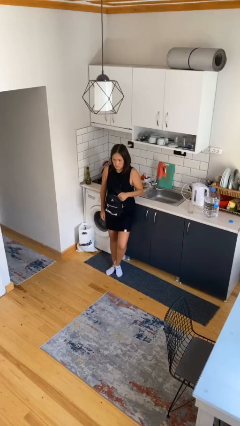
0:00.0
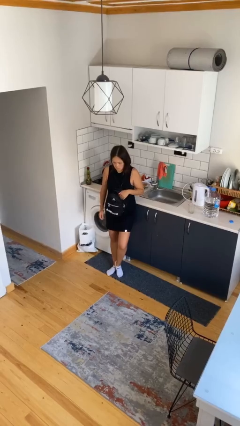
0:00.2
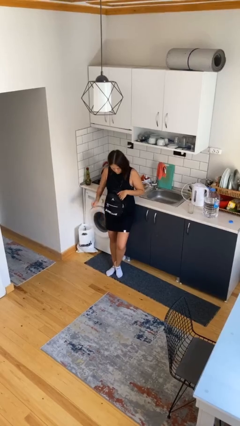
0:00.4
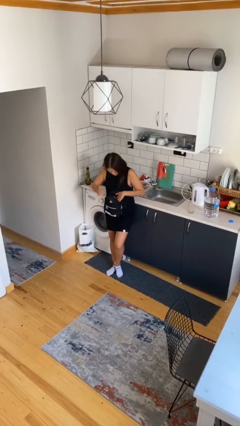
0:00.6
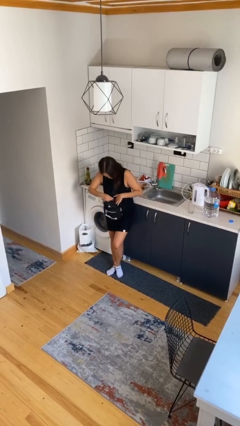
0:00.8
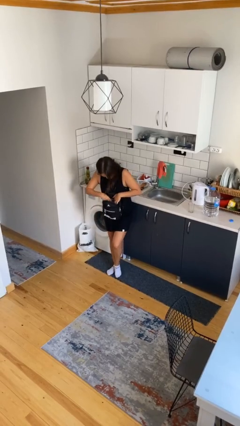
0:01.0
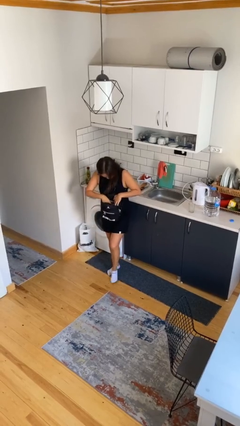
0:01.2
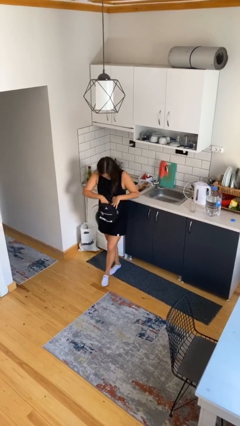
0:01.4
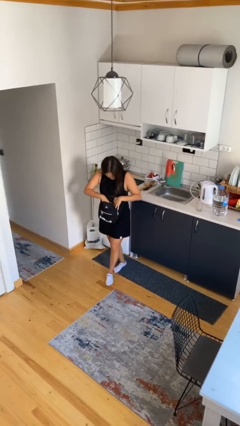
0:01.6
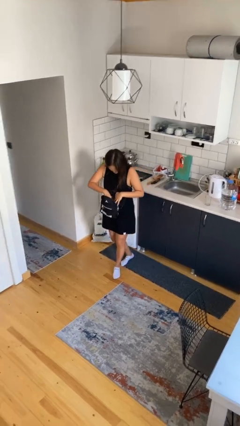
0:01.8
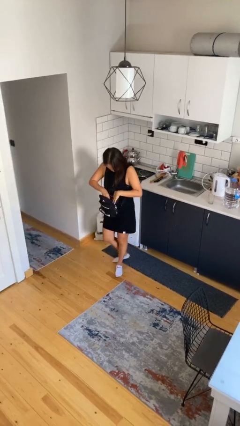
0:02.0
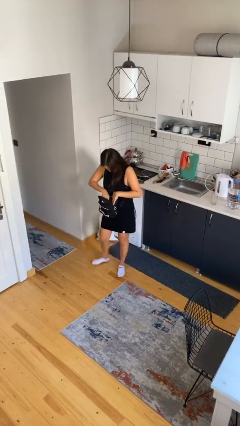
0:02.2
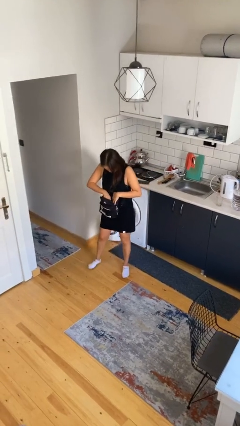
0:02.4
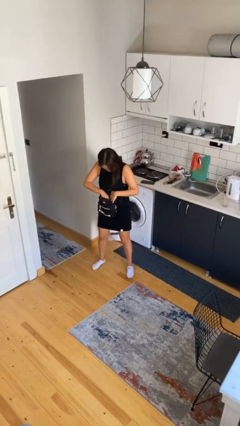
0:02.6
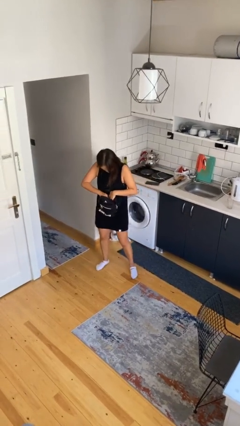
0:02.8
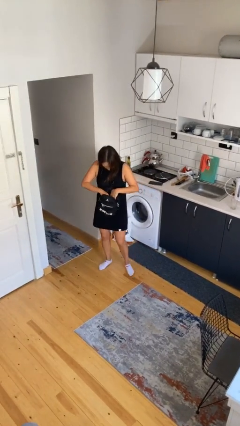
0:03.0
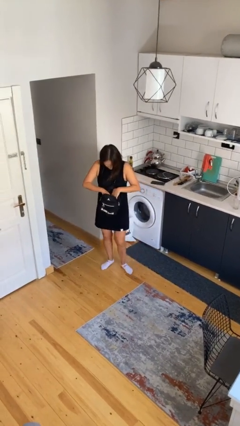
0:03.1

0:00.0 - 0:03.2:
person searches in backpack

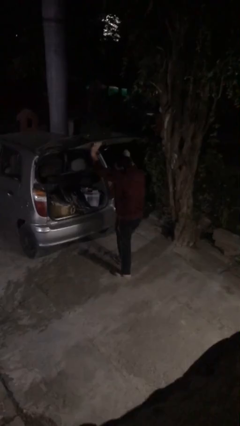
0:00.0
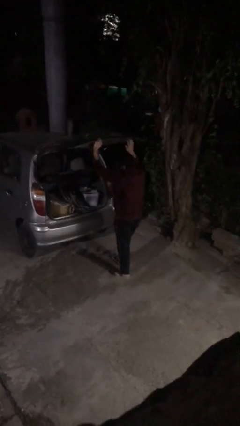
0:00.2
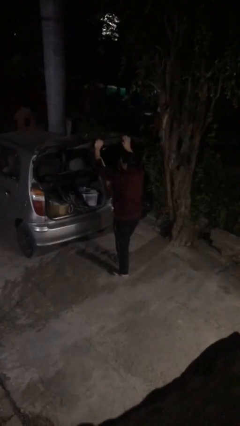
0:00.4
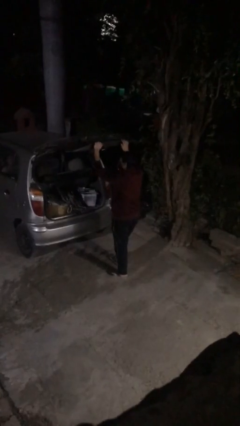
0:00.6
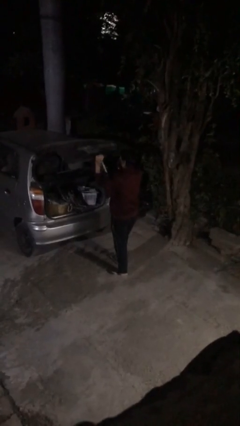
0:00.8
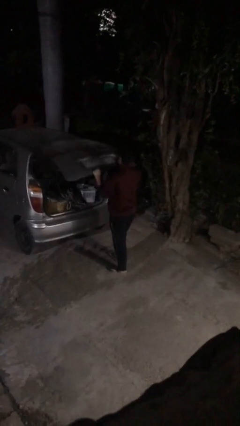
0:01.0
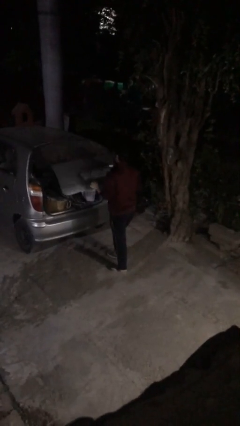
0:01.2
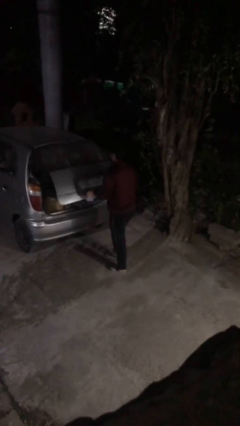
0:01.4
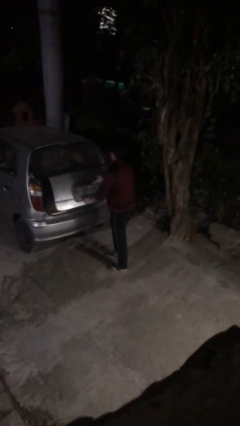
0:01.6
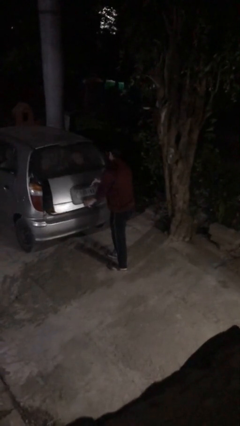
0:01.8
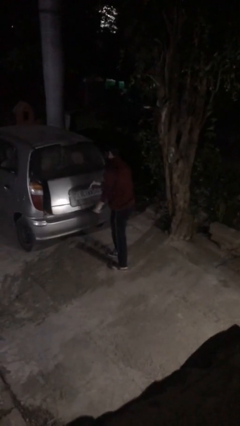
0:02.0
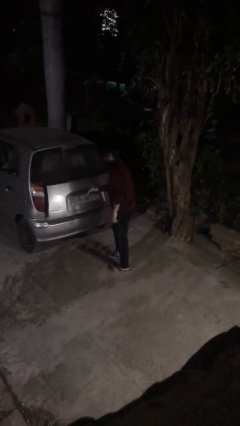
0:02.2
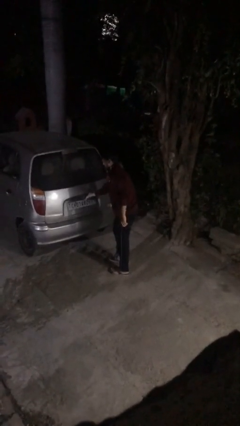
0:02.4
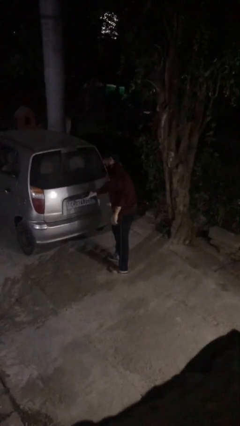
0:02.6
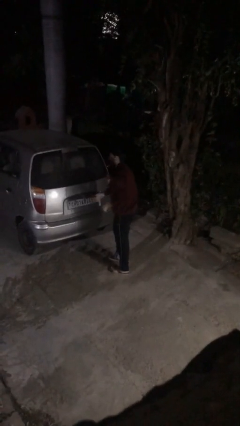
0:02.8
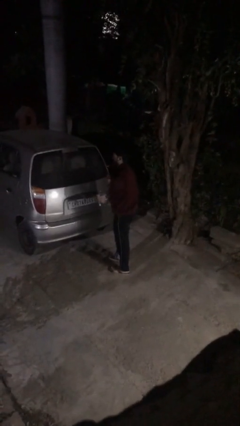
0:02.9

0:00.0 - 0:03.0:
person closes car trunk

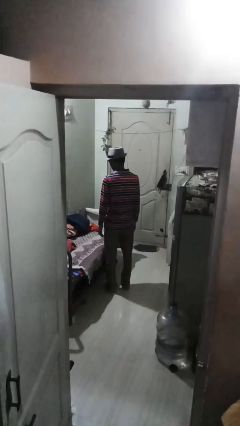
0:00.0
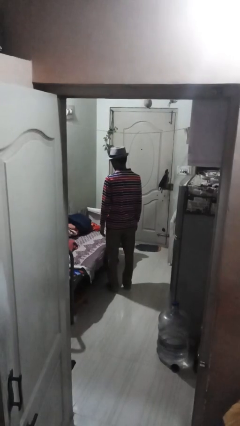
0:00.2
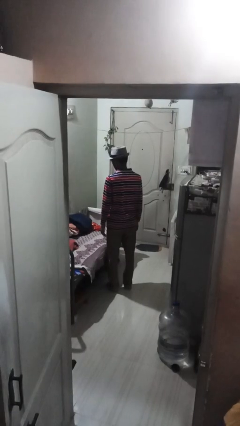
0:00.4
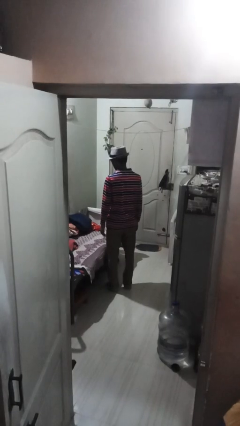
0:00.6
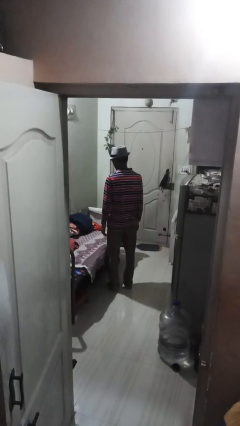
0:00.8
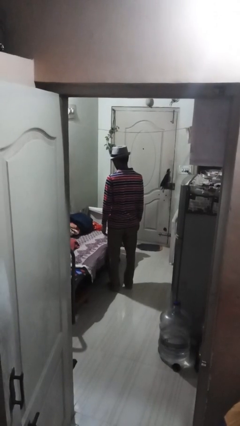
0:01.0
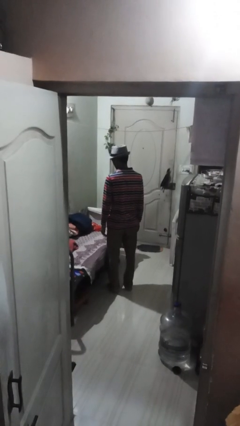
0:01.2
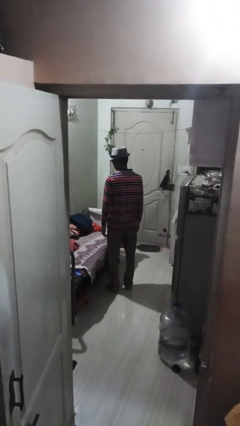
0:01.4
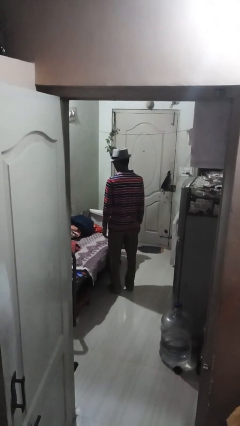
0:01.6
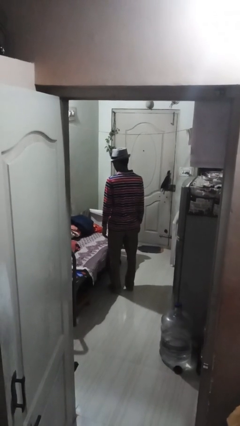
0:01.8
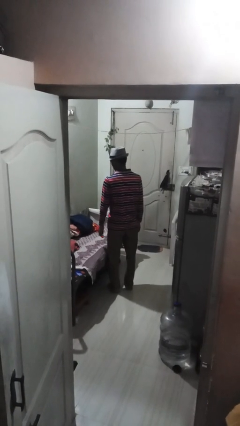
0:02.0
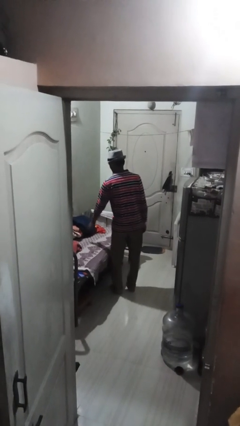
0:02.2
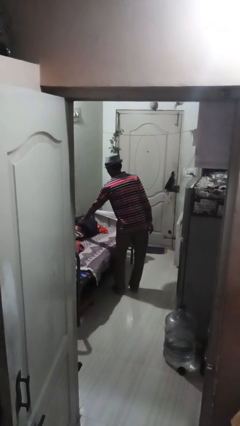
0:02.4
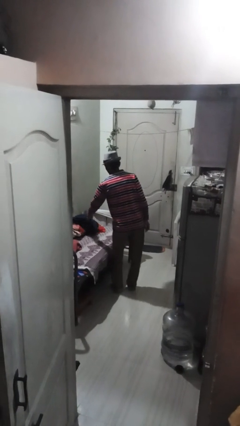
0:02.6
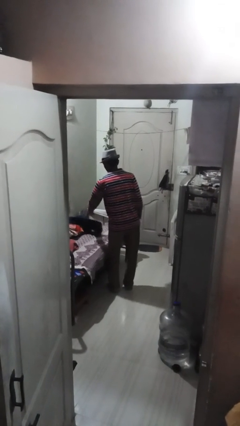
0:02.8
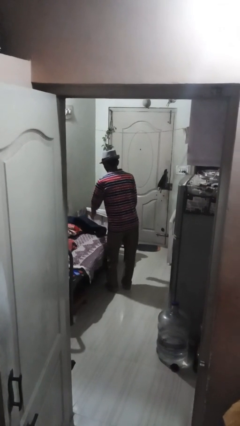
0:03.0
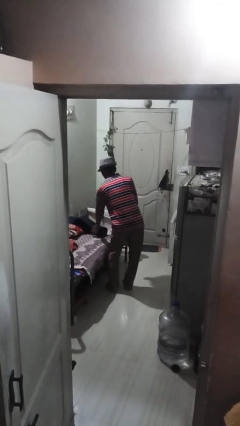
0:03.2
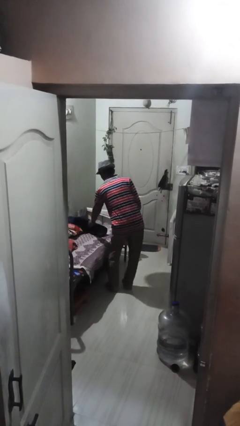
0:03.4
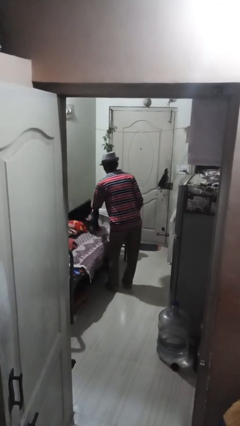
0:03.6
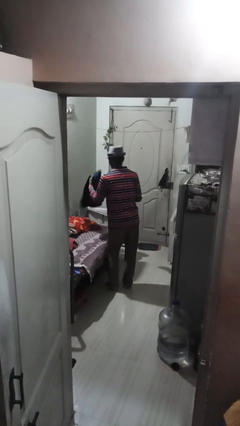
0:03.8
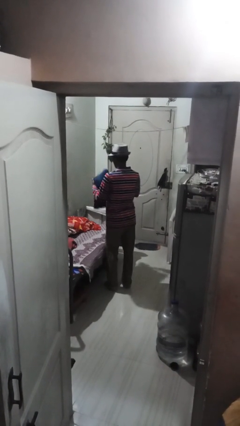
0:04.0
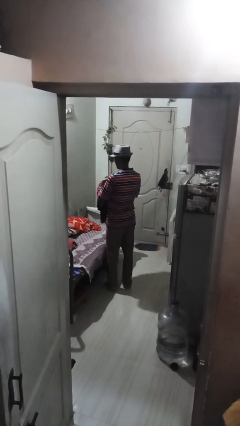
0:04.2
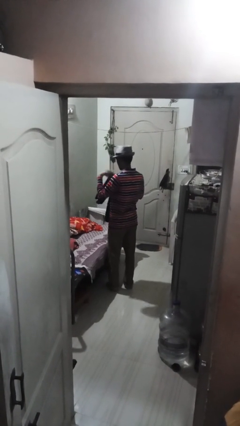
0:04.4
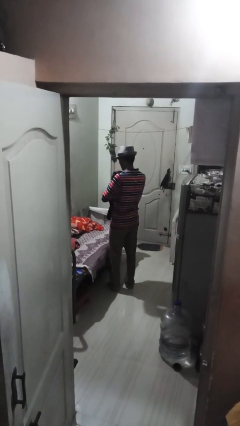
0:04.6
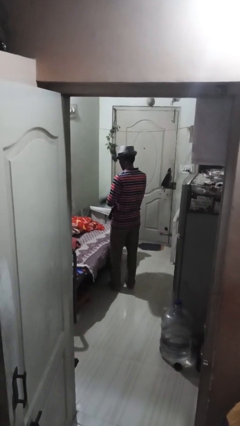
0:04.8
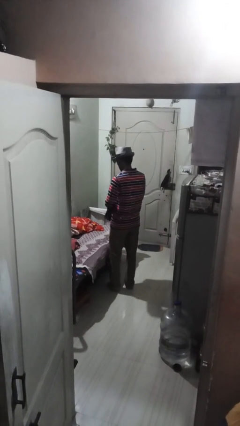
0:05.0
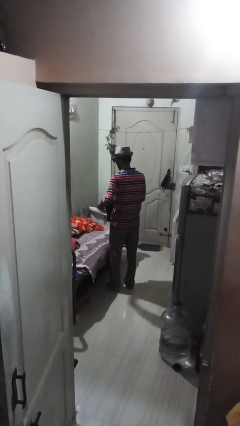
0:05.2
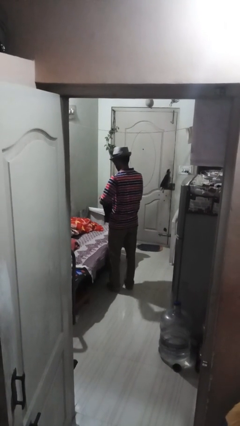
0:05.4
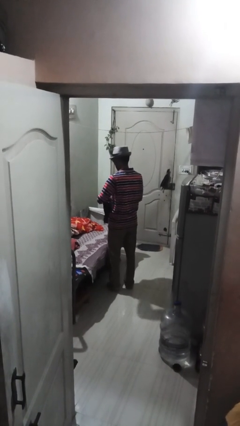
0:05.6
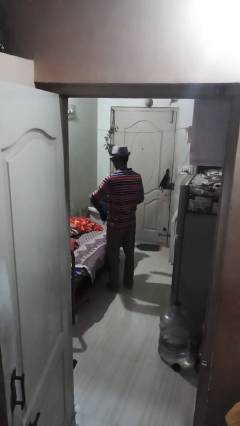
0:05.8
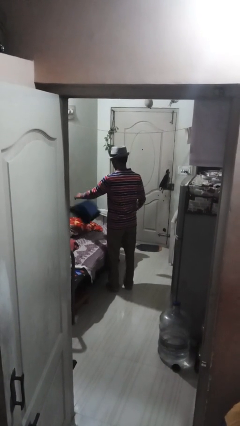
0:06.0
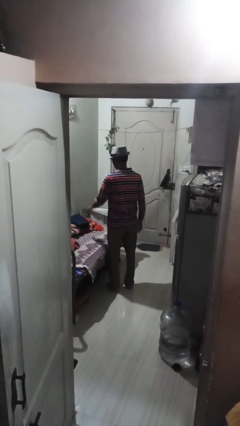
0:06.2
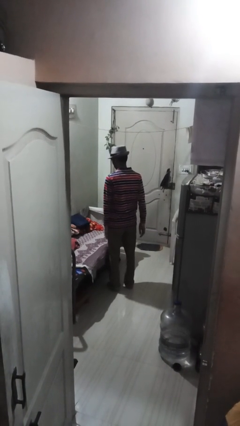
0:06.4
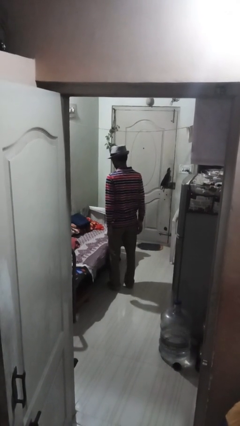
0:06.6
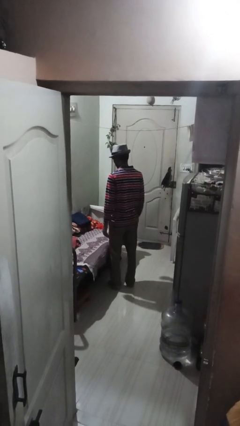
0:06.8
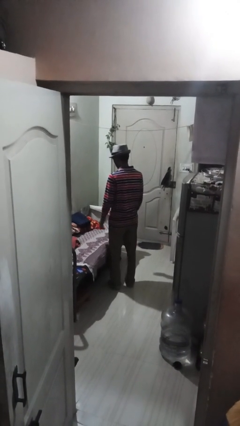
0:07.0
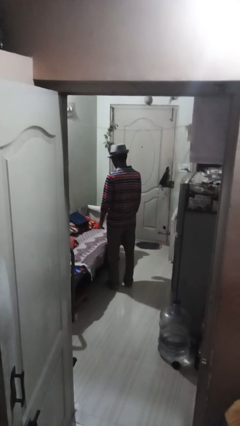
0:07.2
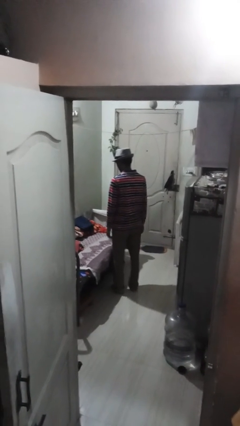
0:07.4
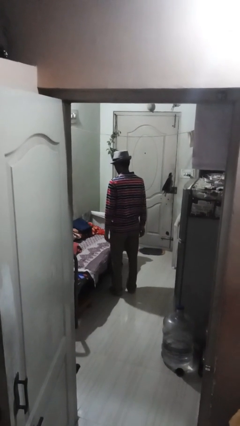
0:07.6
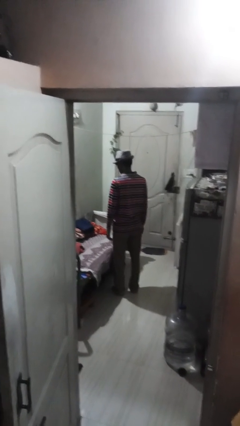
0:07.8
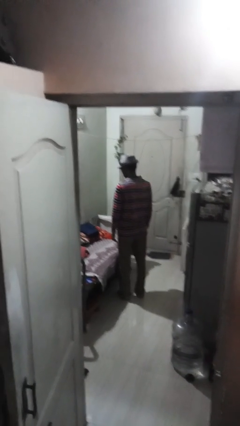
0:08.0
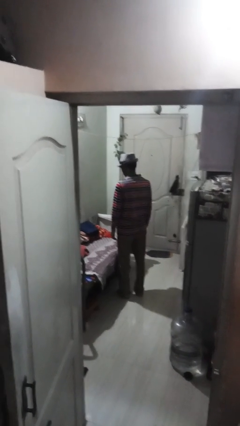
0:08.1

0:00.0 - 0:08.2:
person folds pants

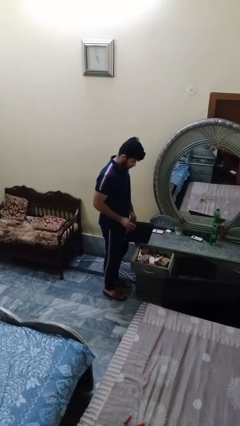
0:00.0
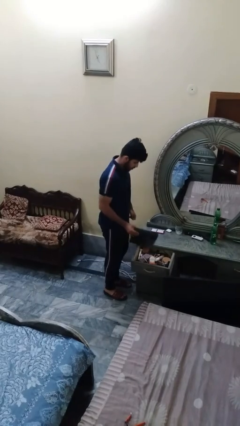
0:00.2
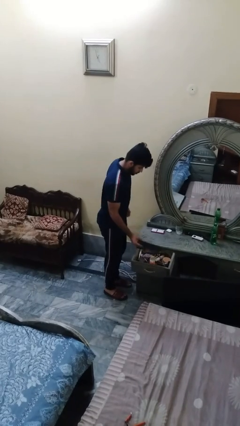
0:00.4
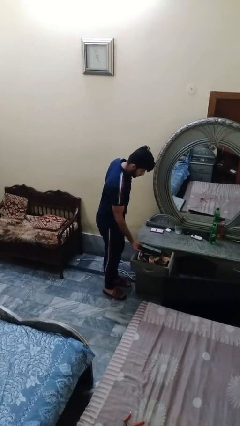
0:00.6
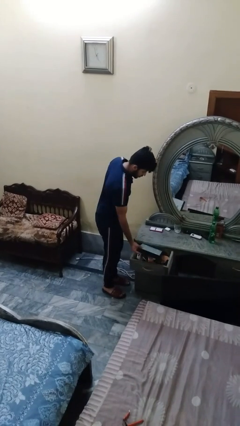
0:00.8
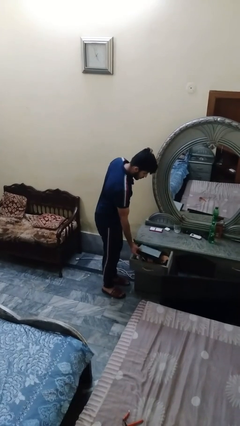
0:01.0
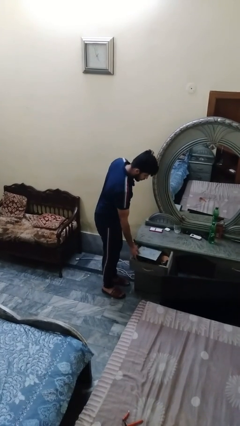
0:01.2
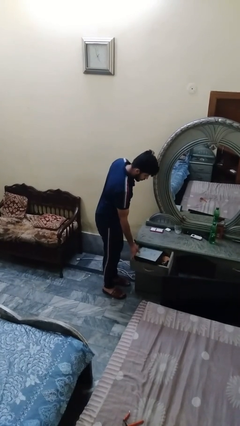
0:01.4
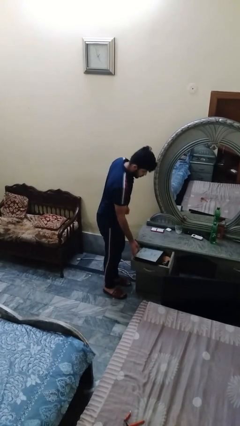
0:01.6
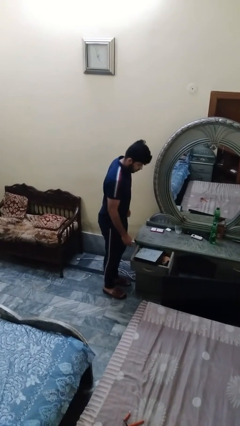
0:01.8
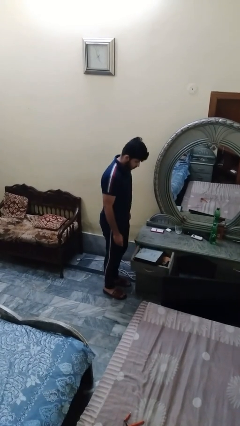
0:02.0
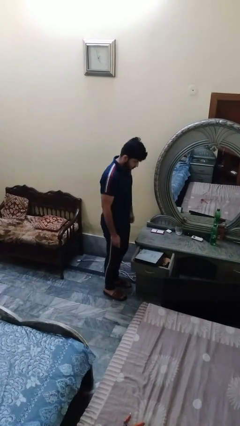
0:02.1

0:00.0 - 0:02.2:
person puts down object into cabinet

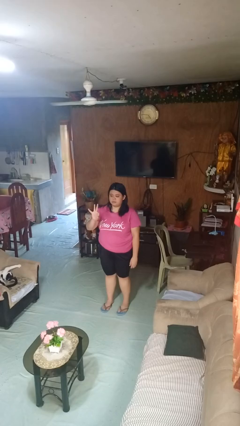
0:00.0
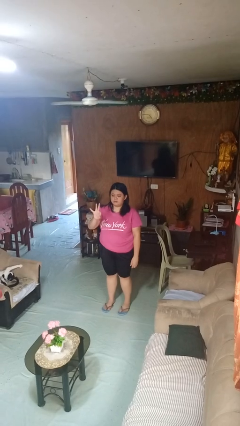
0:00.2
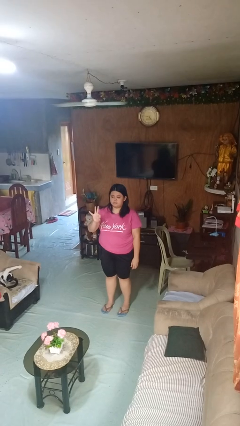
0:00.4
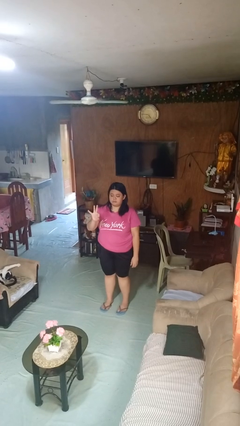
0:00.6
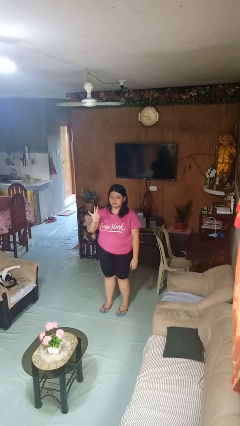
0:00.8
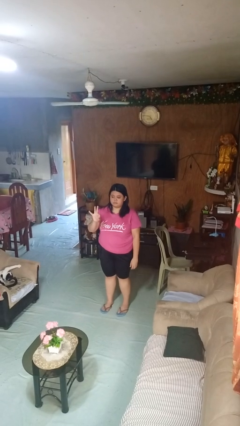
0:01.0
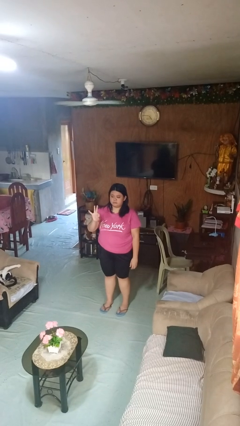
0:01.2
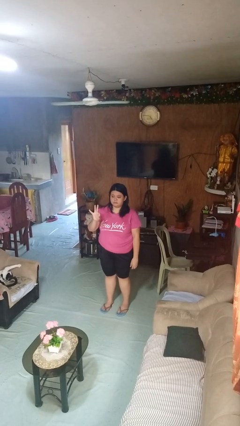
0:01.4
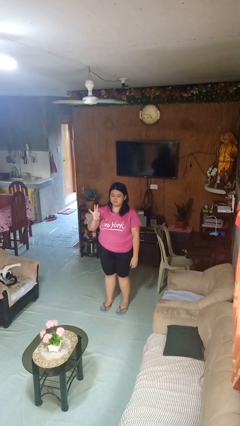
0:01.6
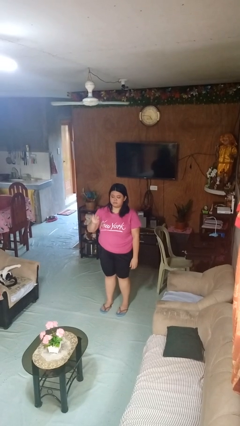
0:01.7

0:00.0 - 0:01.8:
person gestures number three
